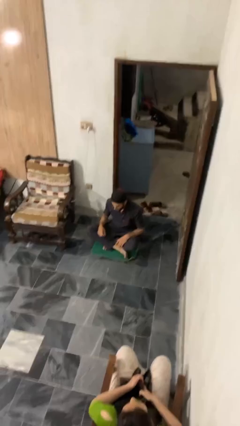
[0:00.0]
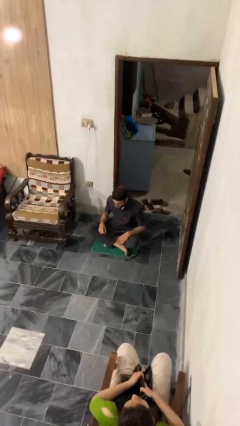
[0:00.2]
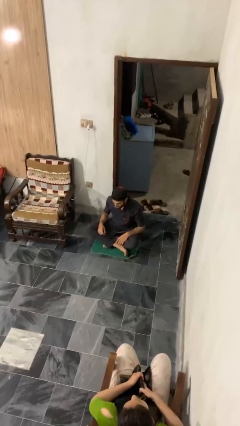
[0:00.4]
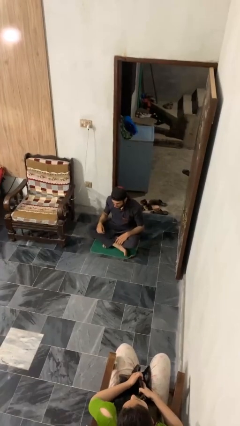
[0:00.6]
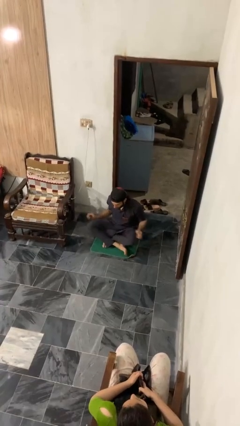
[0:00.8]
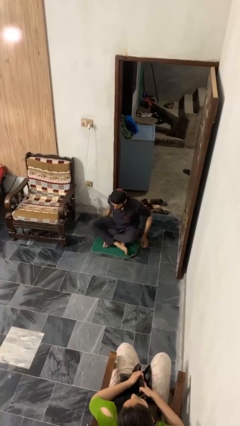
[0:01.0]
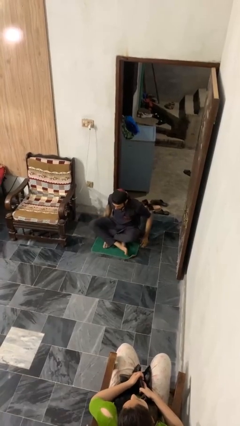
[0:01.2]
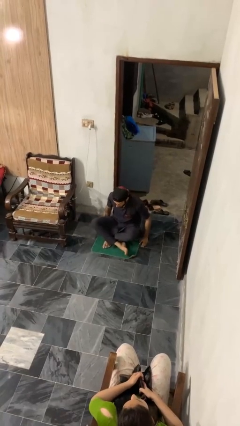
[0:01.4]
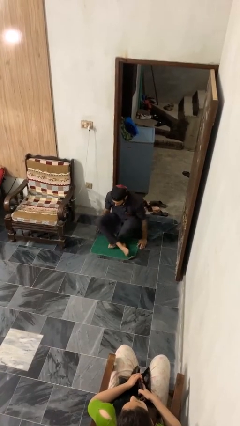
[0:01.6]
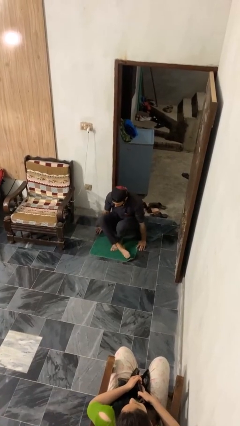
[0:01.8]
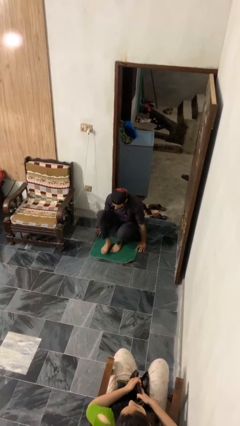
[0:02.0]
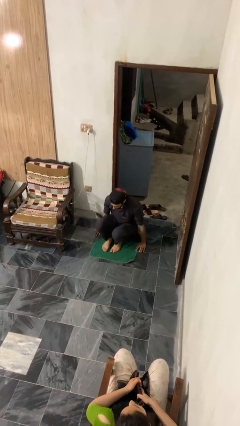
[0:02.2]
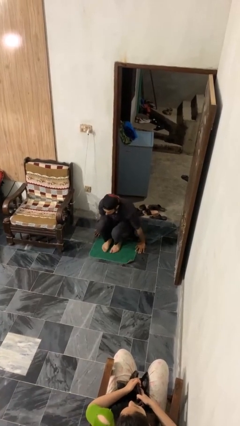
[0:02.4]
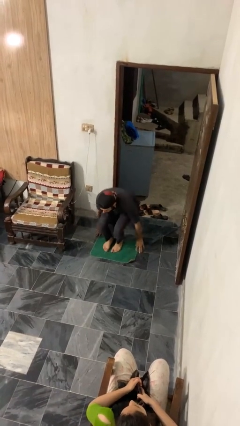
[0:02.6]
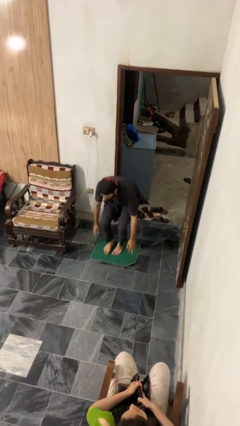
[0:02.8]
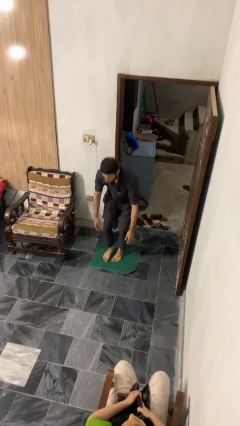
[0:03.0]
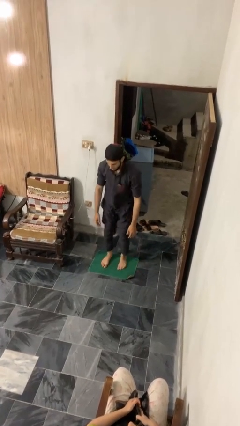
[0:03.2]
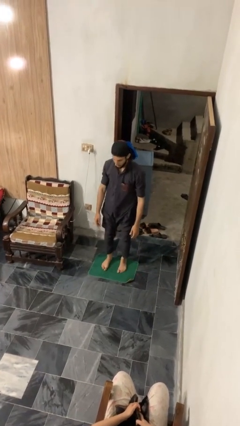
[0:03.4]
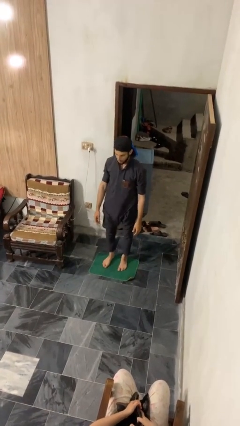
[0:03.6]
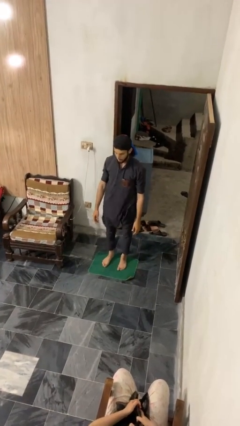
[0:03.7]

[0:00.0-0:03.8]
person stands up from floor

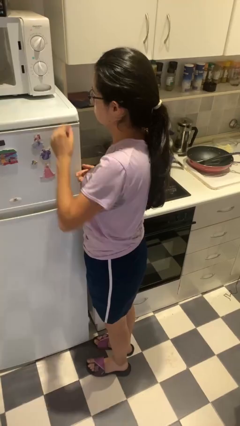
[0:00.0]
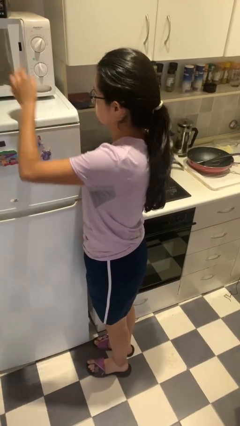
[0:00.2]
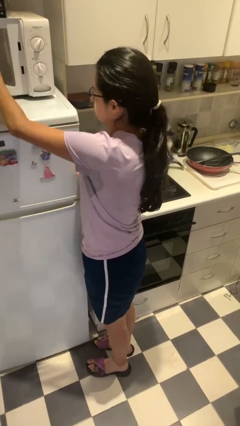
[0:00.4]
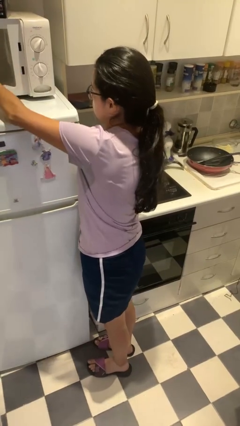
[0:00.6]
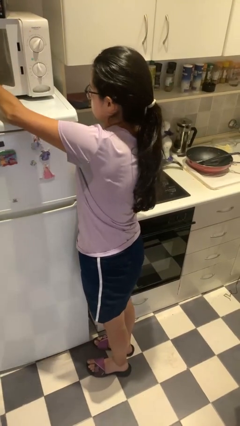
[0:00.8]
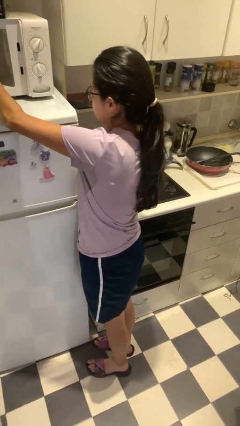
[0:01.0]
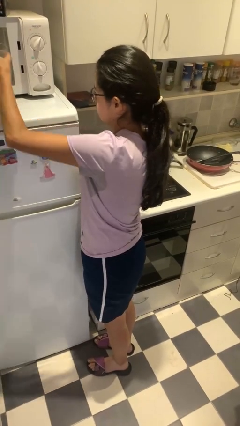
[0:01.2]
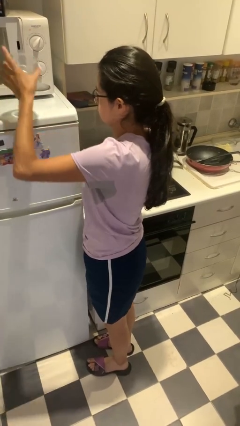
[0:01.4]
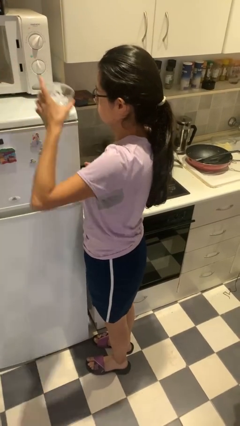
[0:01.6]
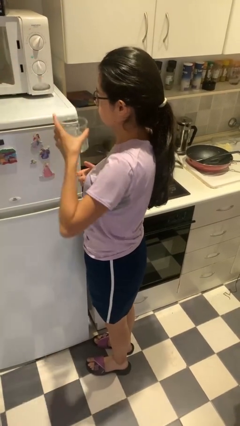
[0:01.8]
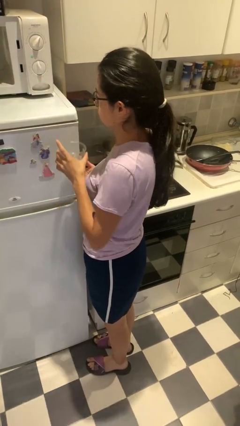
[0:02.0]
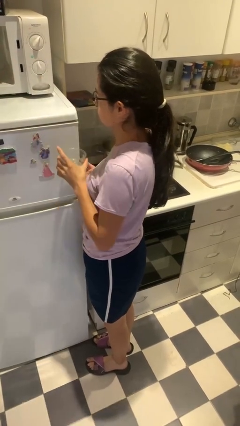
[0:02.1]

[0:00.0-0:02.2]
person takes object from microwave

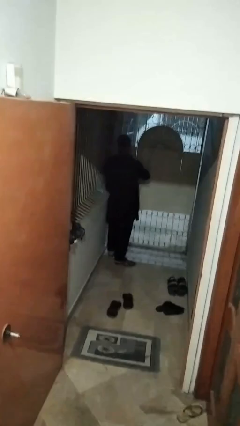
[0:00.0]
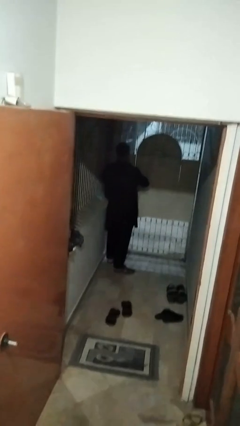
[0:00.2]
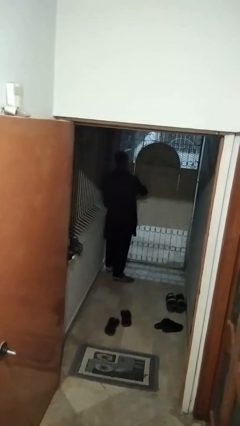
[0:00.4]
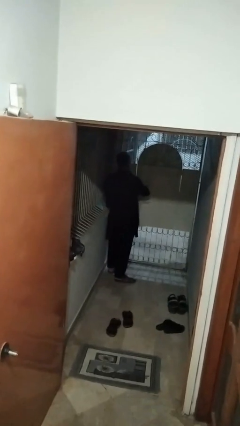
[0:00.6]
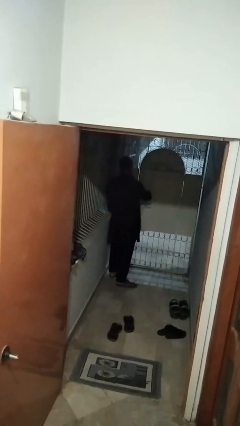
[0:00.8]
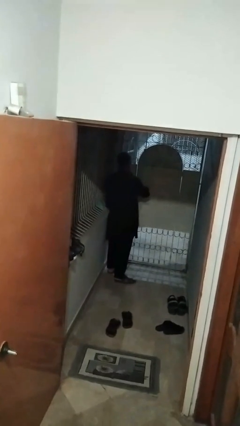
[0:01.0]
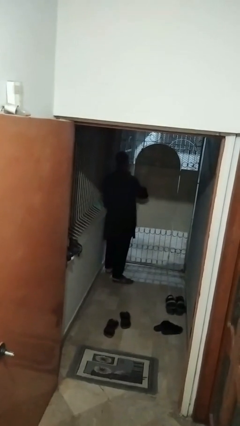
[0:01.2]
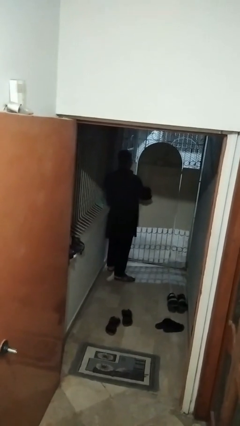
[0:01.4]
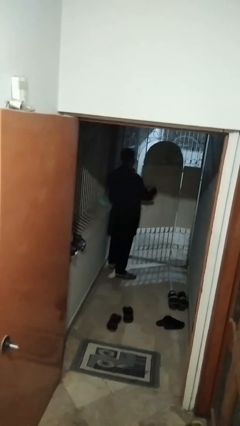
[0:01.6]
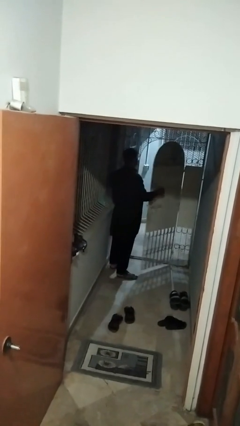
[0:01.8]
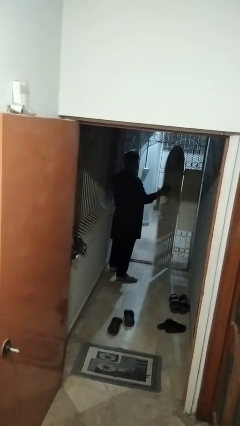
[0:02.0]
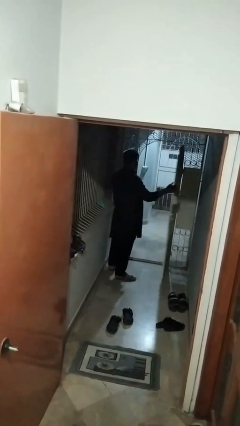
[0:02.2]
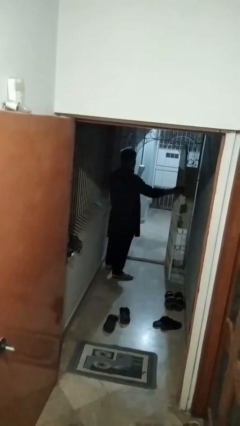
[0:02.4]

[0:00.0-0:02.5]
person opens gate

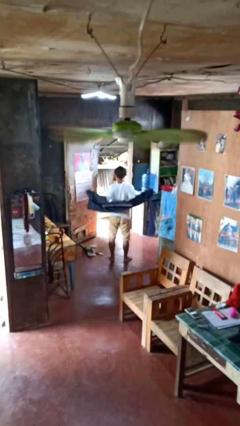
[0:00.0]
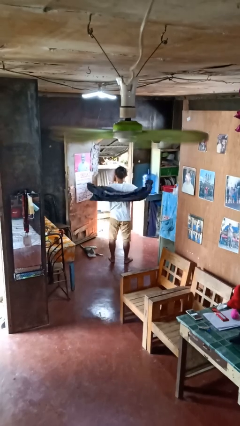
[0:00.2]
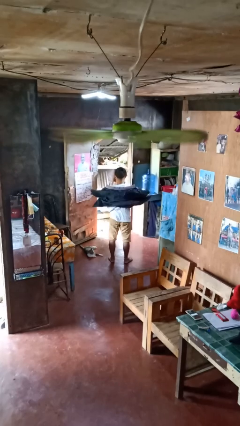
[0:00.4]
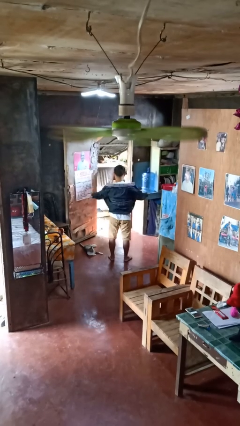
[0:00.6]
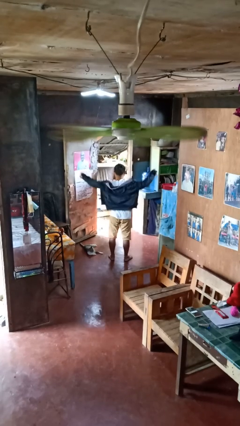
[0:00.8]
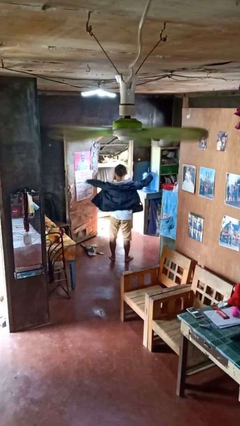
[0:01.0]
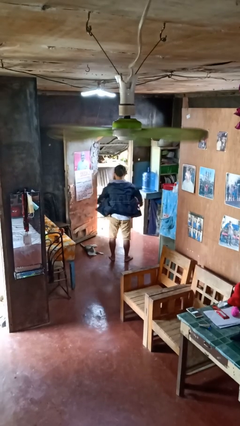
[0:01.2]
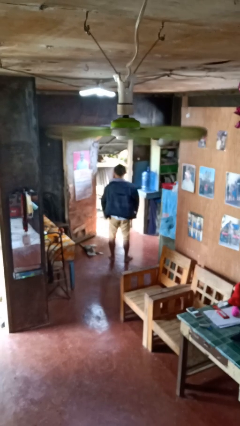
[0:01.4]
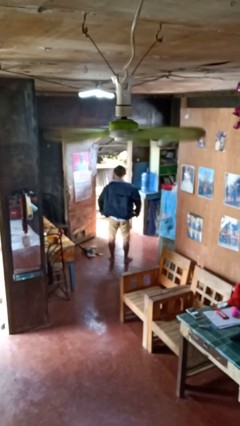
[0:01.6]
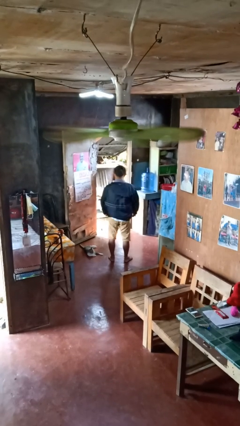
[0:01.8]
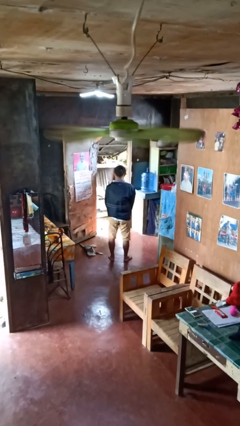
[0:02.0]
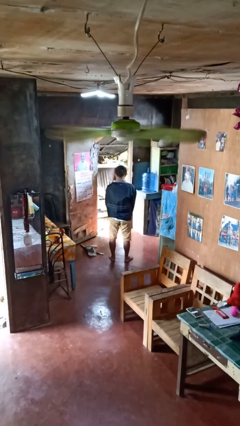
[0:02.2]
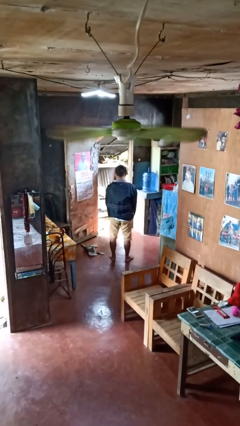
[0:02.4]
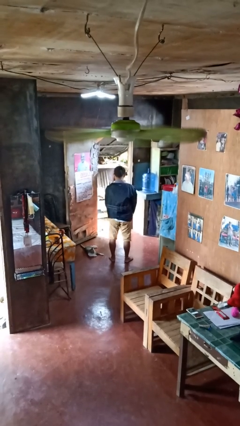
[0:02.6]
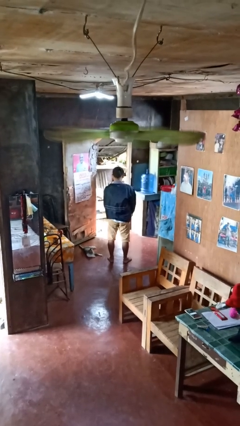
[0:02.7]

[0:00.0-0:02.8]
person puts on jacket

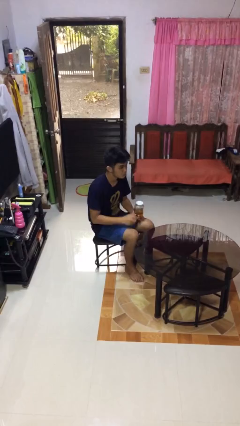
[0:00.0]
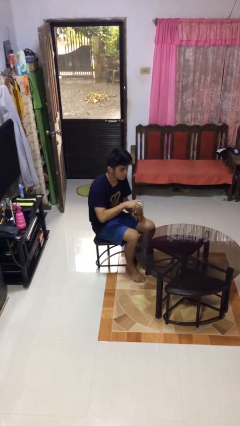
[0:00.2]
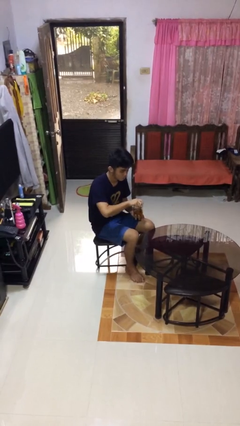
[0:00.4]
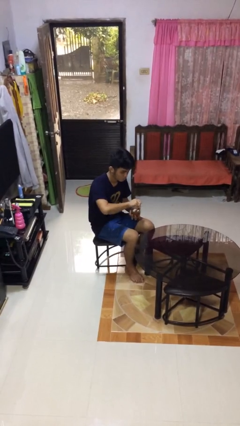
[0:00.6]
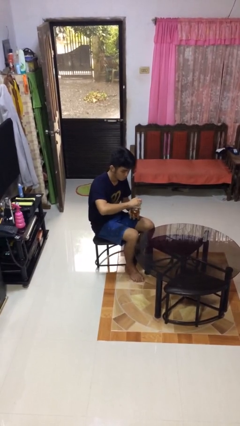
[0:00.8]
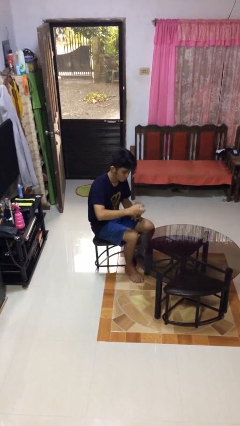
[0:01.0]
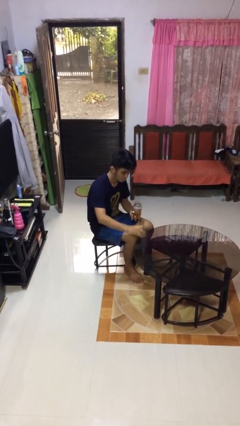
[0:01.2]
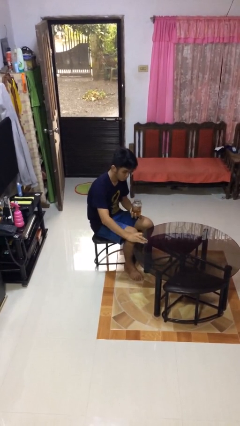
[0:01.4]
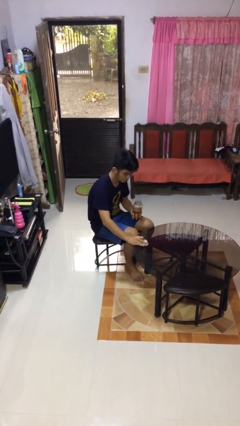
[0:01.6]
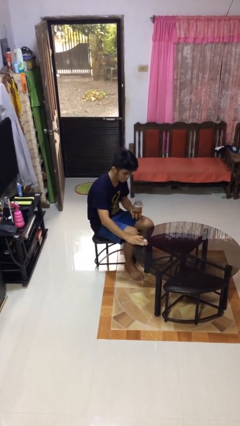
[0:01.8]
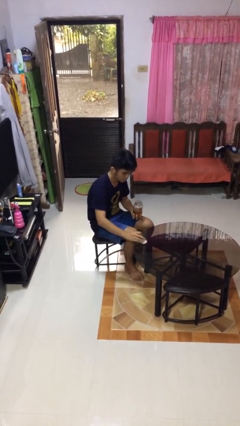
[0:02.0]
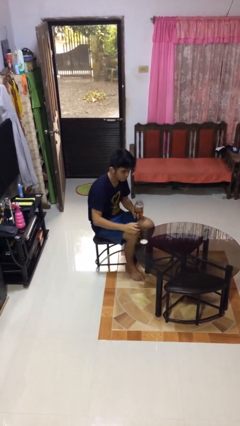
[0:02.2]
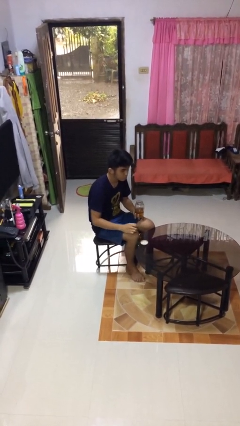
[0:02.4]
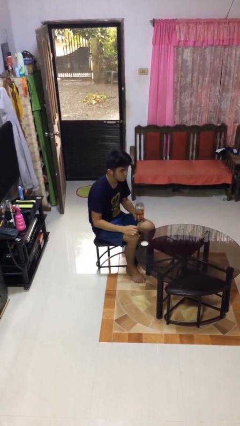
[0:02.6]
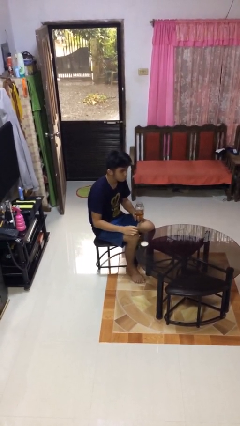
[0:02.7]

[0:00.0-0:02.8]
person opens jar

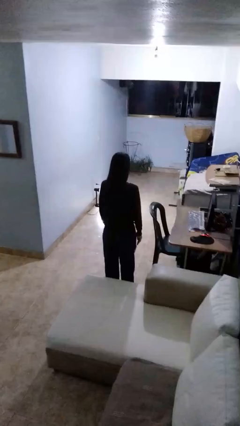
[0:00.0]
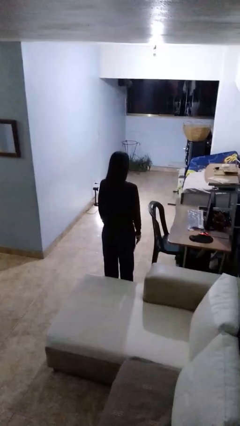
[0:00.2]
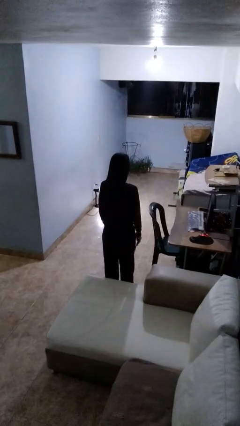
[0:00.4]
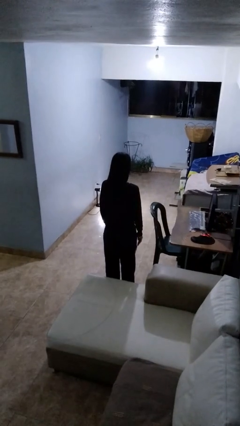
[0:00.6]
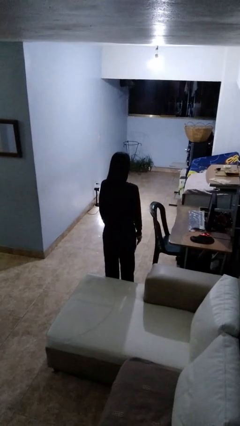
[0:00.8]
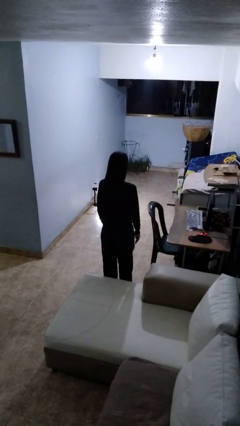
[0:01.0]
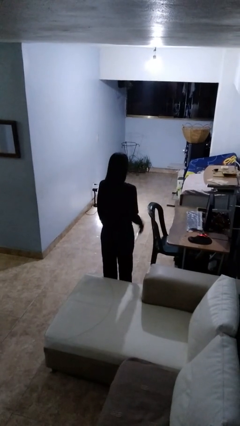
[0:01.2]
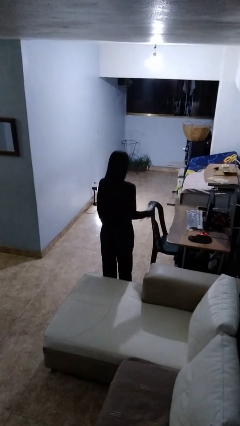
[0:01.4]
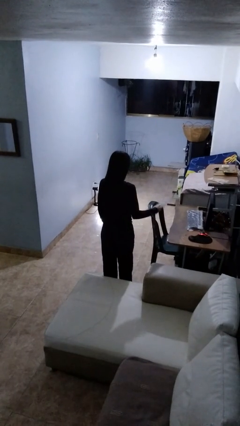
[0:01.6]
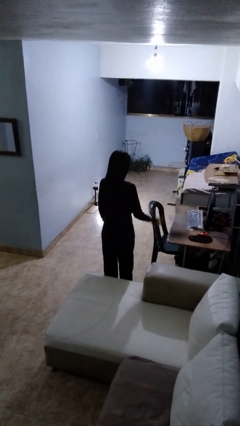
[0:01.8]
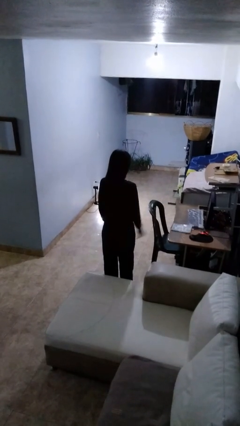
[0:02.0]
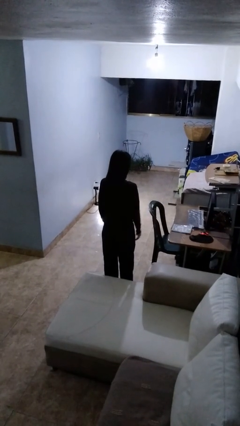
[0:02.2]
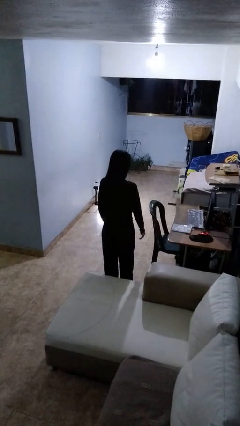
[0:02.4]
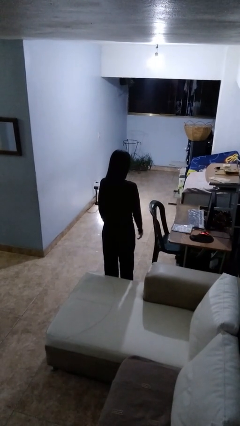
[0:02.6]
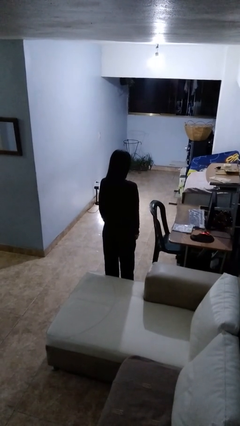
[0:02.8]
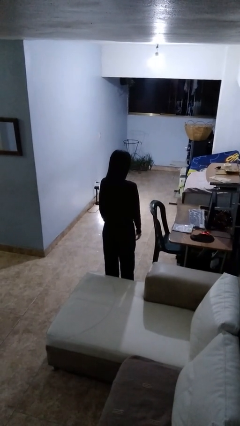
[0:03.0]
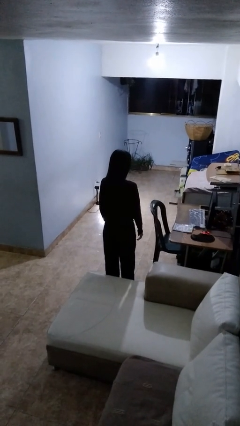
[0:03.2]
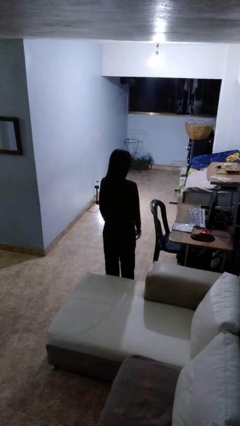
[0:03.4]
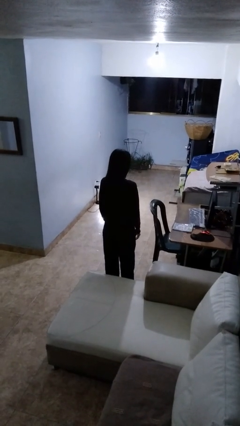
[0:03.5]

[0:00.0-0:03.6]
person throws object on table
